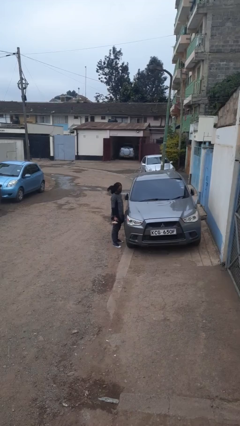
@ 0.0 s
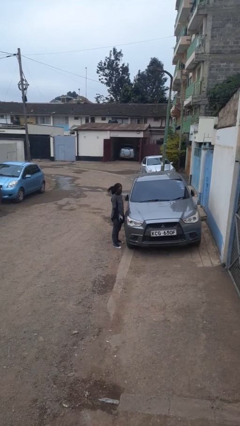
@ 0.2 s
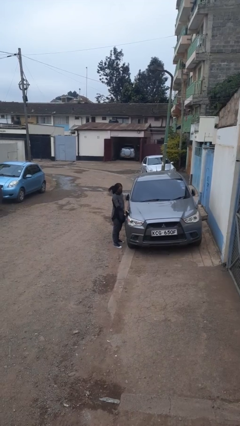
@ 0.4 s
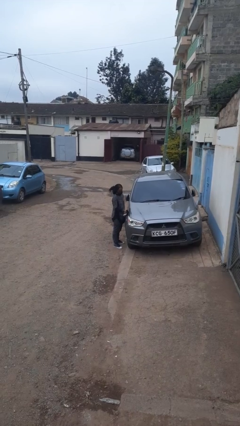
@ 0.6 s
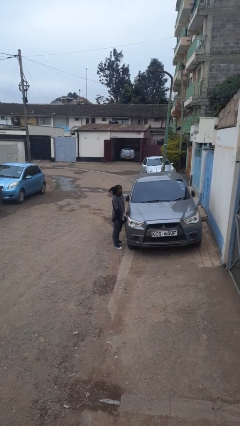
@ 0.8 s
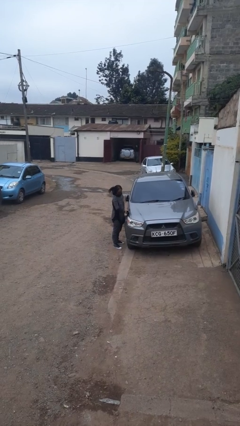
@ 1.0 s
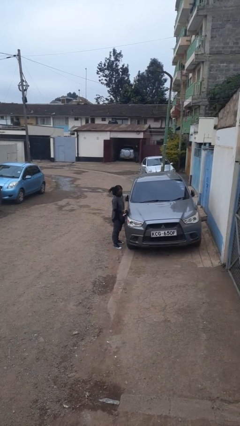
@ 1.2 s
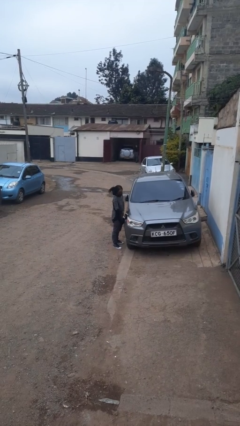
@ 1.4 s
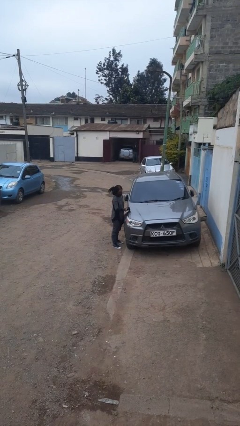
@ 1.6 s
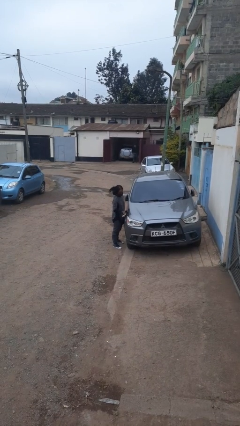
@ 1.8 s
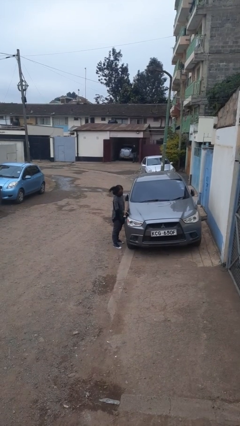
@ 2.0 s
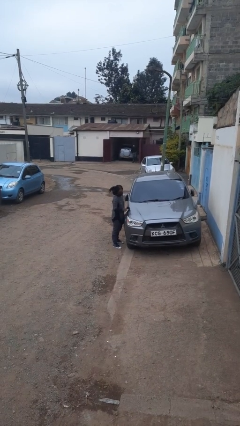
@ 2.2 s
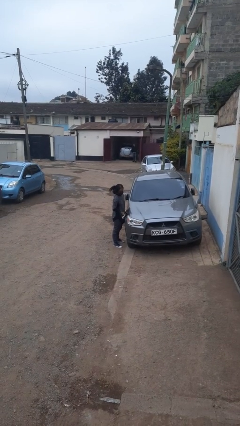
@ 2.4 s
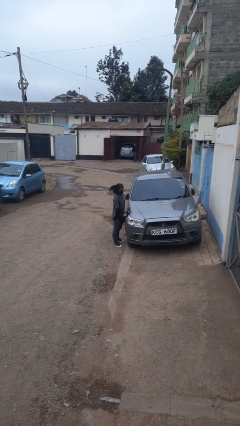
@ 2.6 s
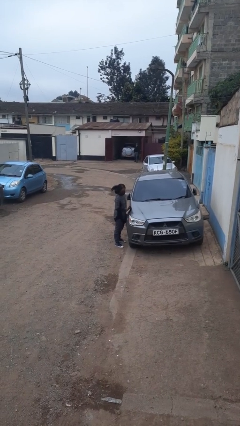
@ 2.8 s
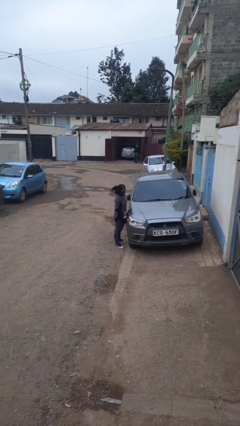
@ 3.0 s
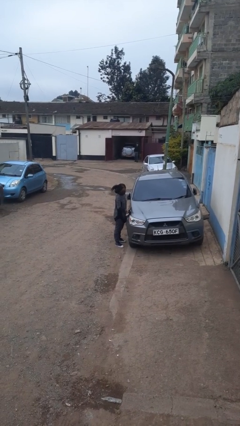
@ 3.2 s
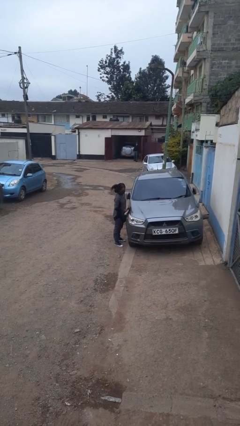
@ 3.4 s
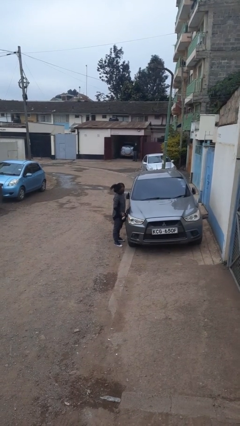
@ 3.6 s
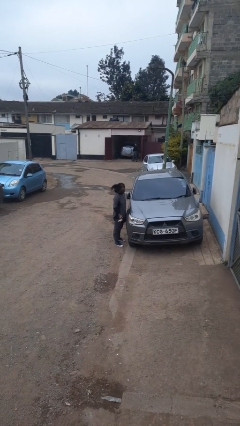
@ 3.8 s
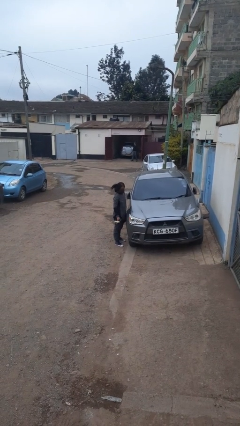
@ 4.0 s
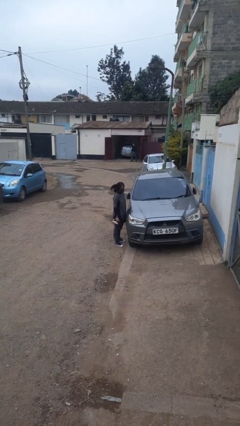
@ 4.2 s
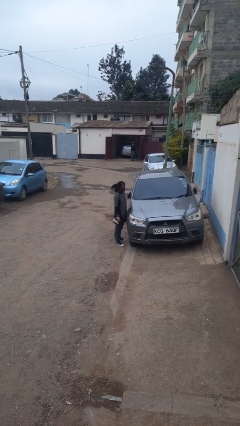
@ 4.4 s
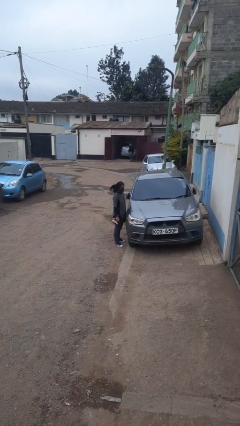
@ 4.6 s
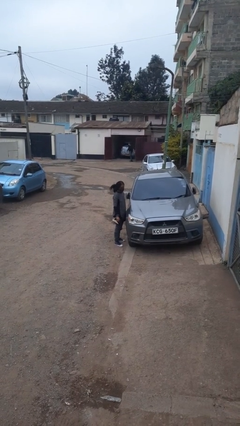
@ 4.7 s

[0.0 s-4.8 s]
person polishes car with rag

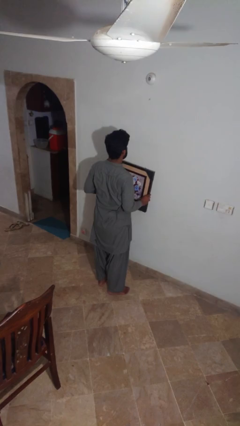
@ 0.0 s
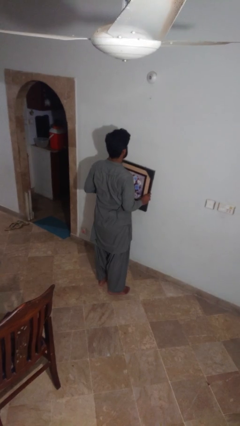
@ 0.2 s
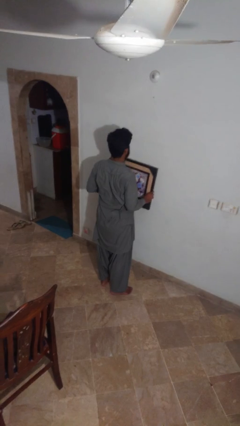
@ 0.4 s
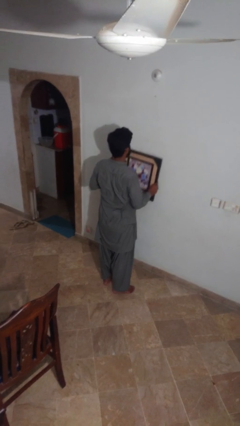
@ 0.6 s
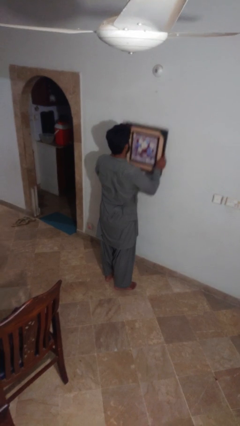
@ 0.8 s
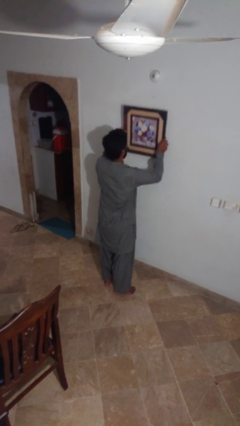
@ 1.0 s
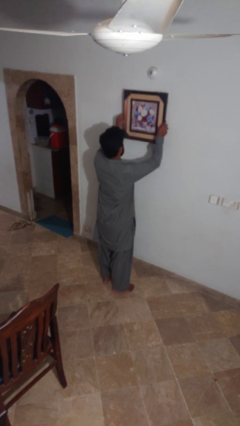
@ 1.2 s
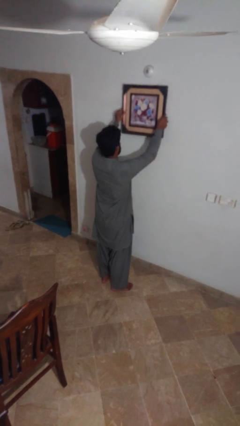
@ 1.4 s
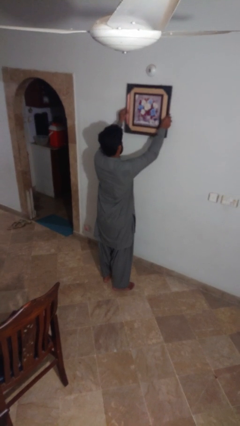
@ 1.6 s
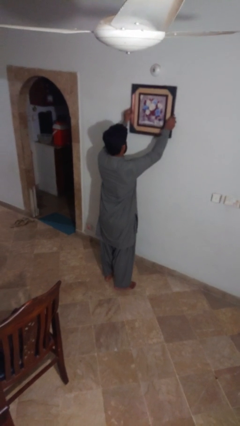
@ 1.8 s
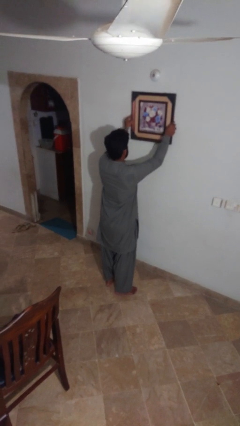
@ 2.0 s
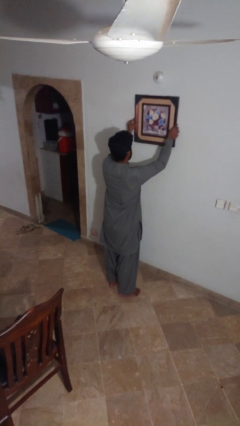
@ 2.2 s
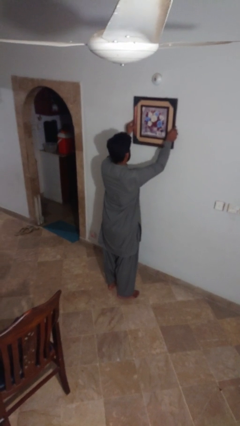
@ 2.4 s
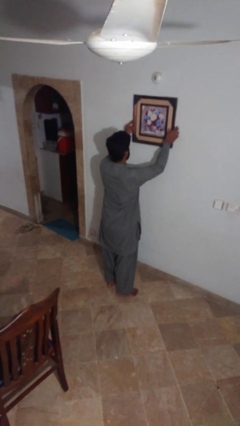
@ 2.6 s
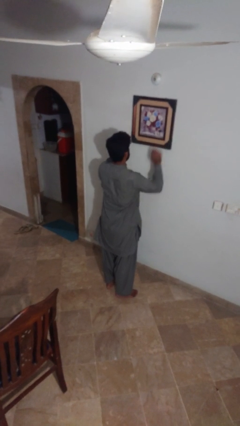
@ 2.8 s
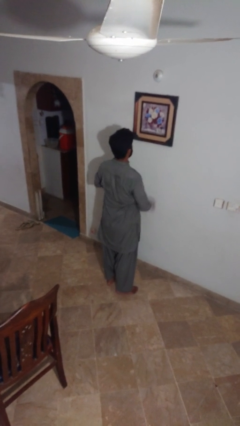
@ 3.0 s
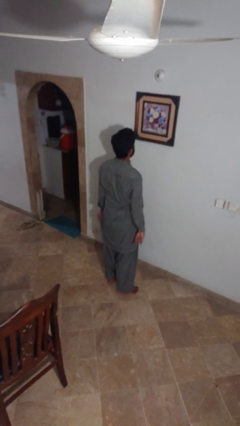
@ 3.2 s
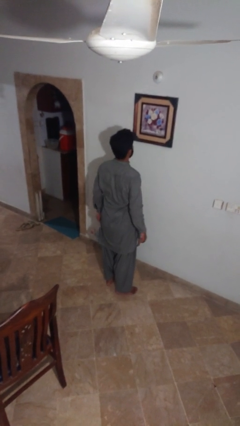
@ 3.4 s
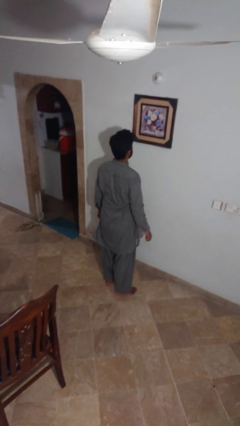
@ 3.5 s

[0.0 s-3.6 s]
person puts up picture frame

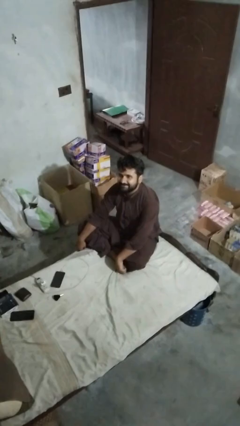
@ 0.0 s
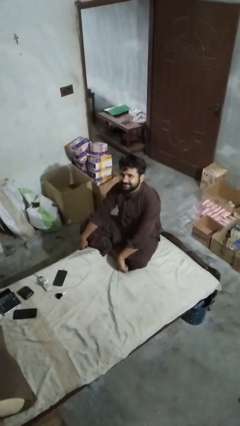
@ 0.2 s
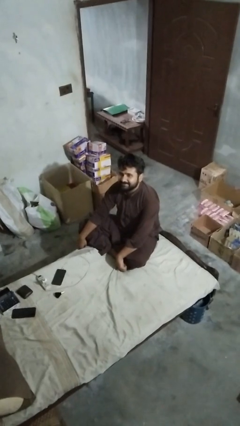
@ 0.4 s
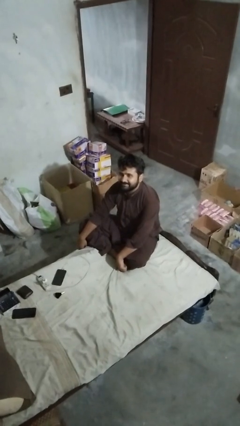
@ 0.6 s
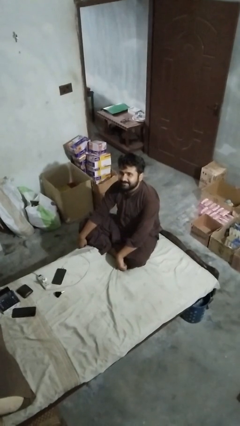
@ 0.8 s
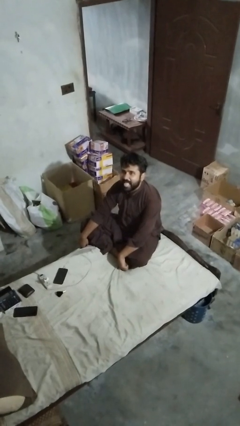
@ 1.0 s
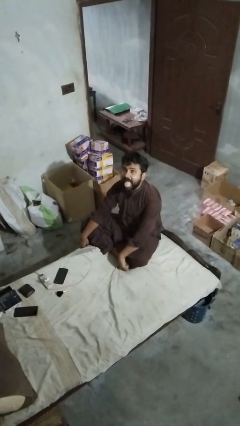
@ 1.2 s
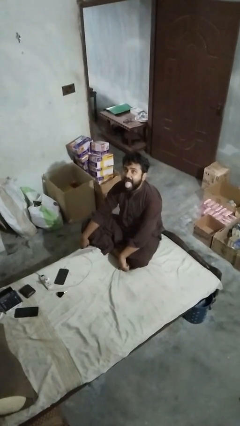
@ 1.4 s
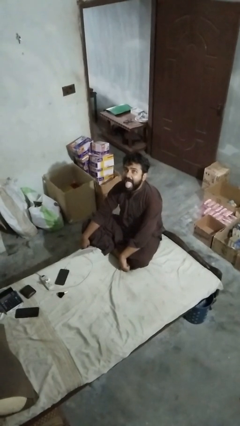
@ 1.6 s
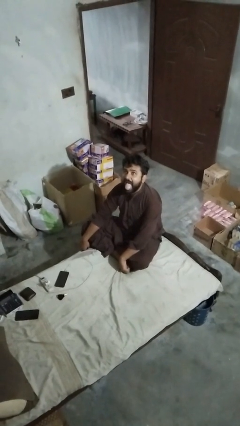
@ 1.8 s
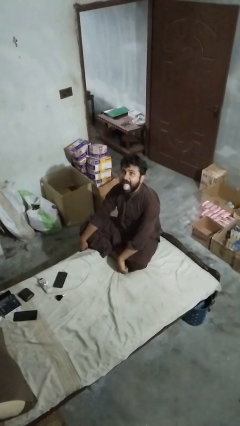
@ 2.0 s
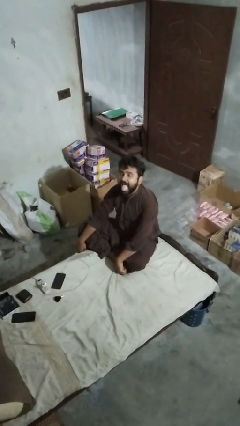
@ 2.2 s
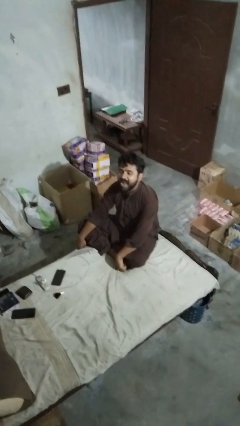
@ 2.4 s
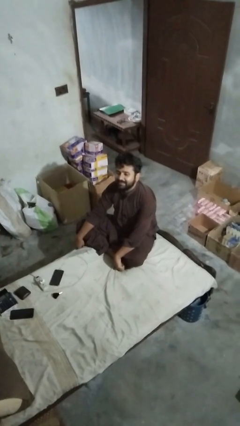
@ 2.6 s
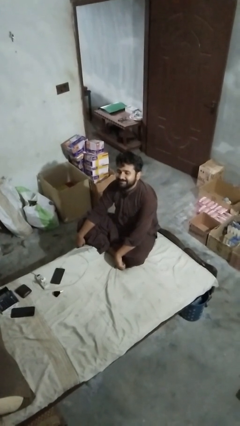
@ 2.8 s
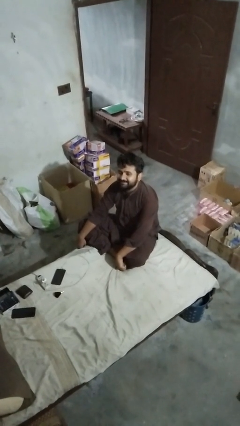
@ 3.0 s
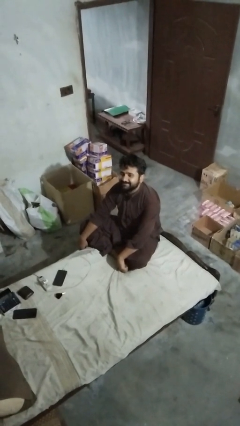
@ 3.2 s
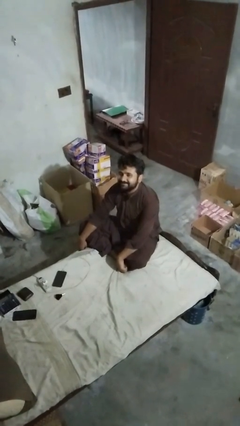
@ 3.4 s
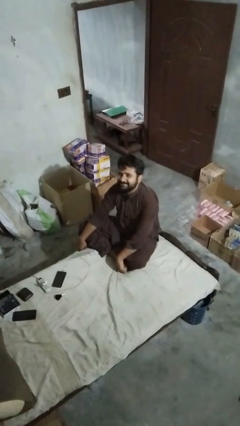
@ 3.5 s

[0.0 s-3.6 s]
person sticks out tongue

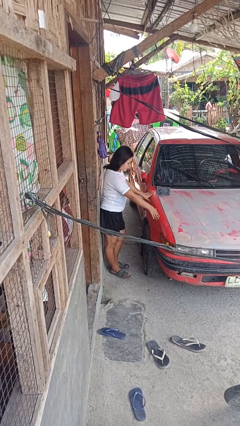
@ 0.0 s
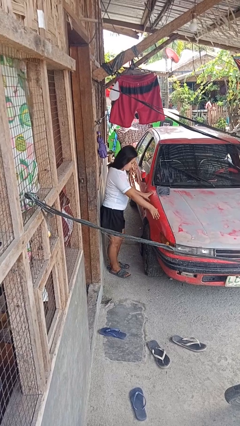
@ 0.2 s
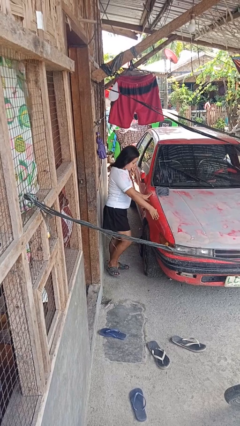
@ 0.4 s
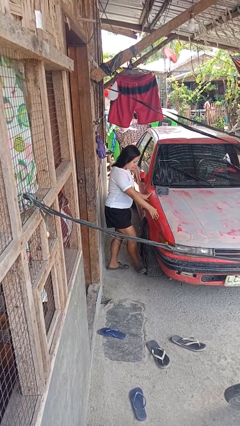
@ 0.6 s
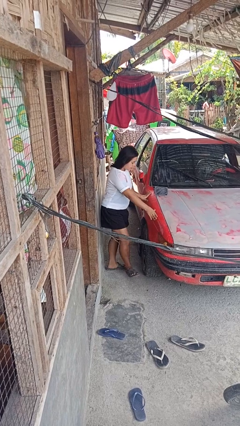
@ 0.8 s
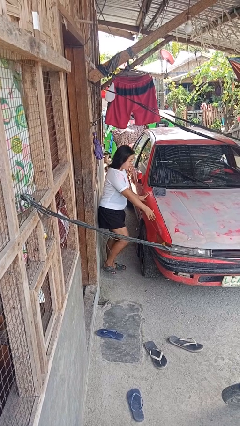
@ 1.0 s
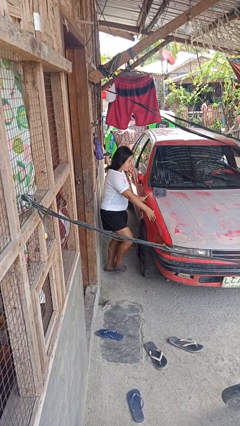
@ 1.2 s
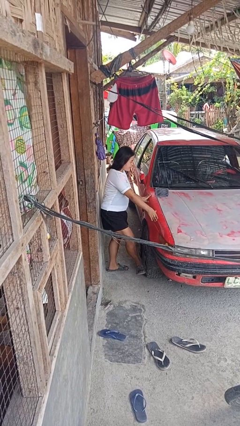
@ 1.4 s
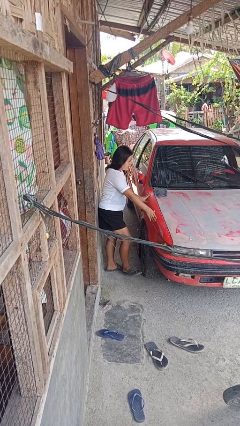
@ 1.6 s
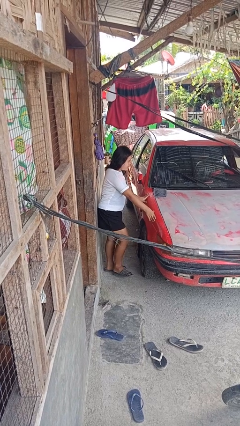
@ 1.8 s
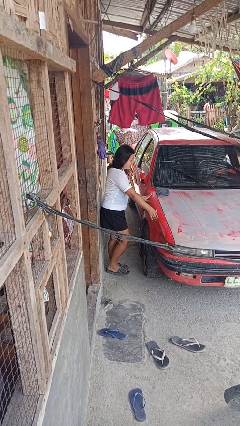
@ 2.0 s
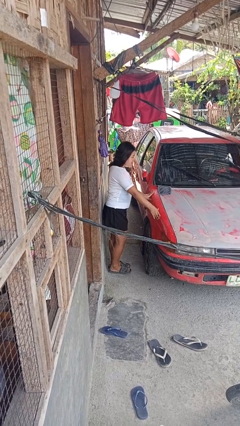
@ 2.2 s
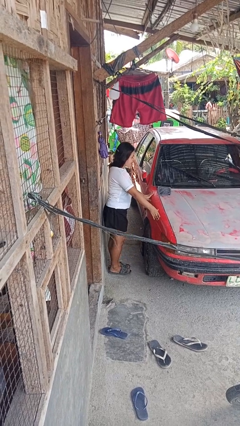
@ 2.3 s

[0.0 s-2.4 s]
person kicks car tires

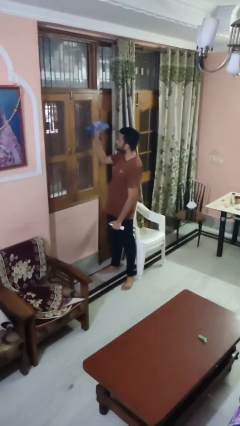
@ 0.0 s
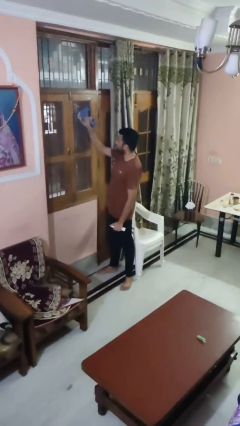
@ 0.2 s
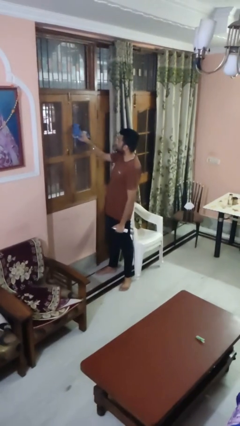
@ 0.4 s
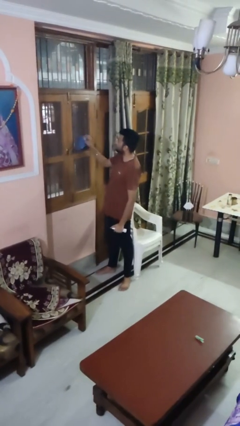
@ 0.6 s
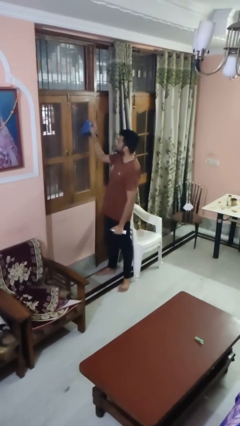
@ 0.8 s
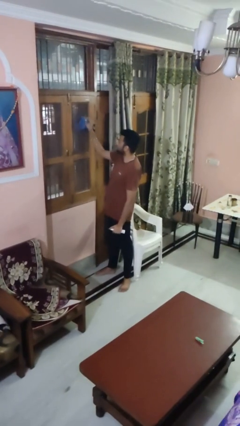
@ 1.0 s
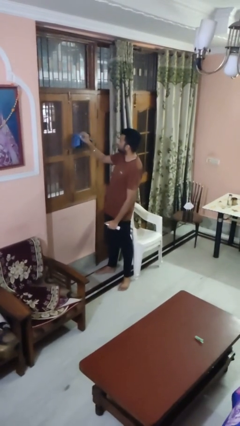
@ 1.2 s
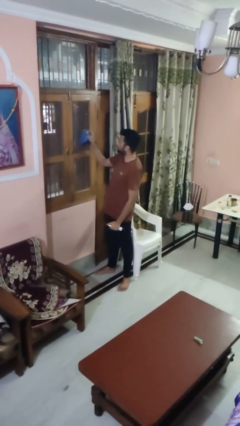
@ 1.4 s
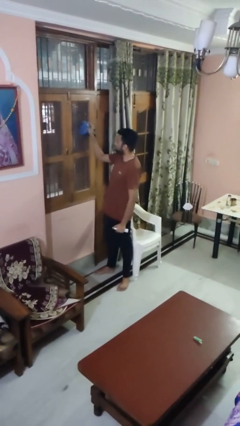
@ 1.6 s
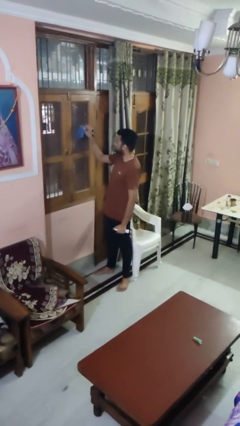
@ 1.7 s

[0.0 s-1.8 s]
person washes window

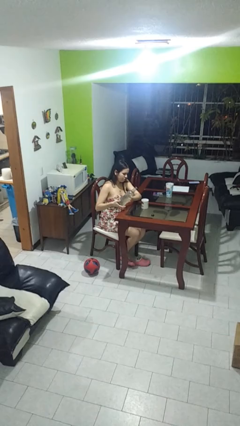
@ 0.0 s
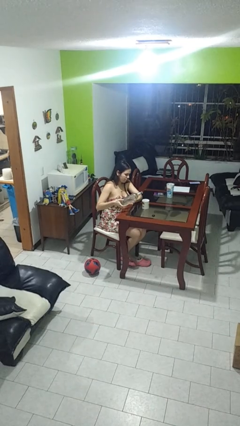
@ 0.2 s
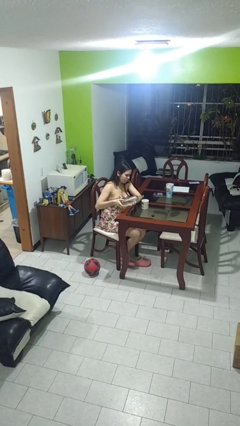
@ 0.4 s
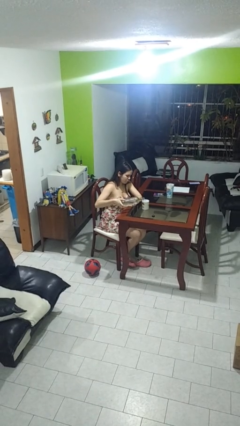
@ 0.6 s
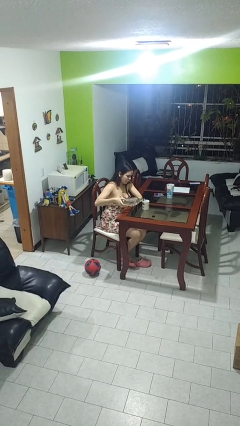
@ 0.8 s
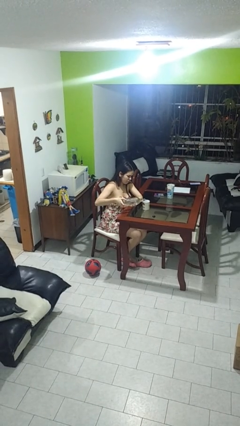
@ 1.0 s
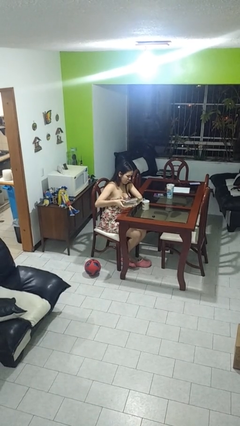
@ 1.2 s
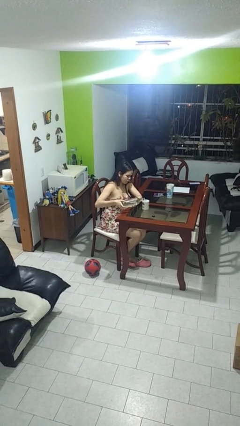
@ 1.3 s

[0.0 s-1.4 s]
person pours liquid into cup
